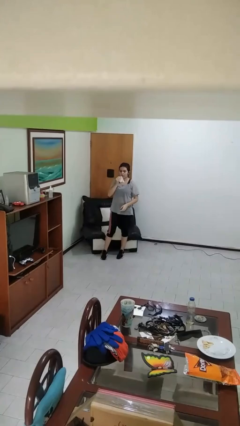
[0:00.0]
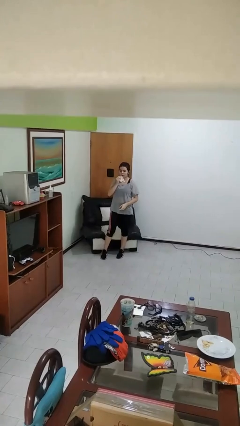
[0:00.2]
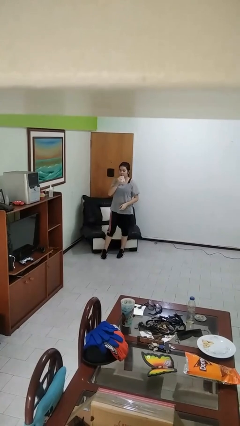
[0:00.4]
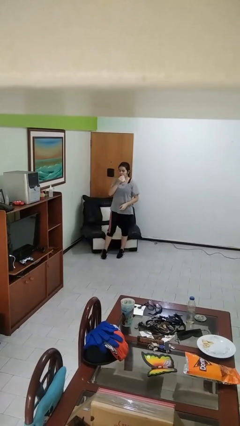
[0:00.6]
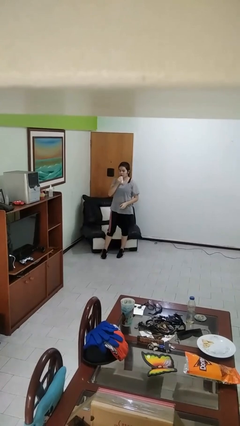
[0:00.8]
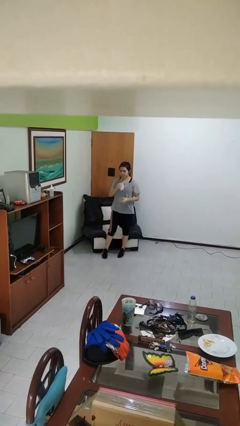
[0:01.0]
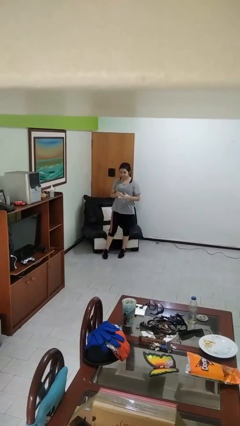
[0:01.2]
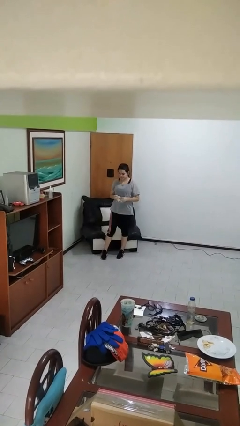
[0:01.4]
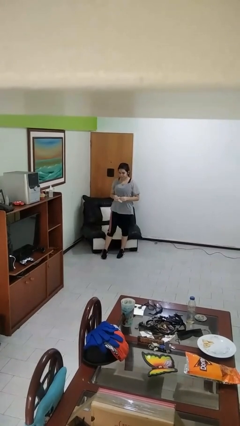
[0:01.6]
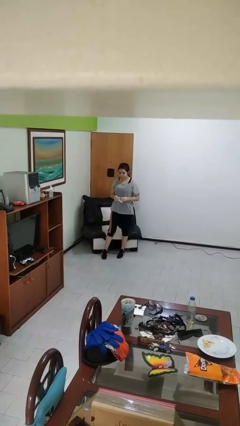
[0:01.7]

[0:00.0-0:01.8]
person wipes mouth with napkin

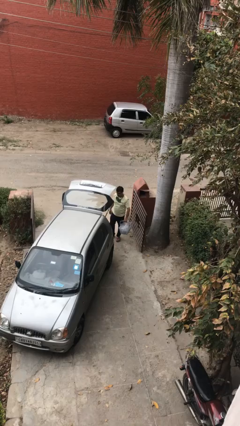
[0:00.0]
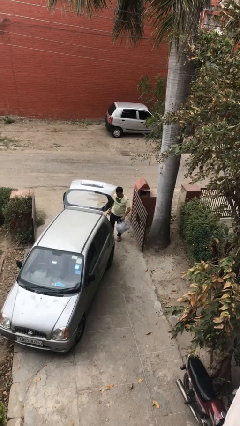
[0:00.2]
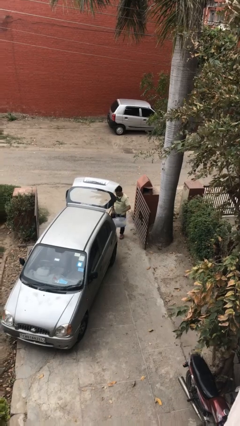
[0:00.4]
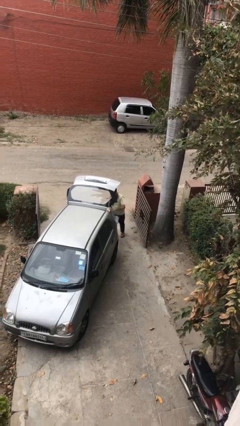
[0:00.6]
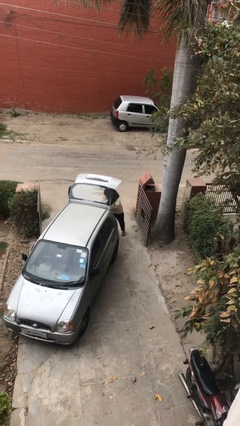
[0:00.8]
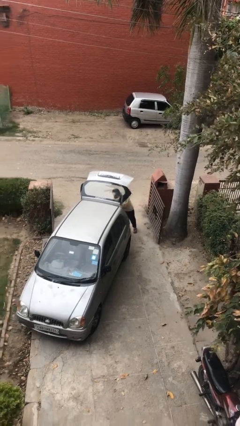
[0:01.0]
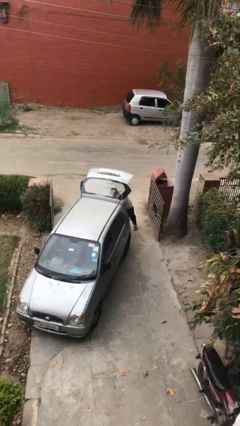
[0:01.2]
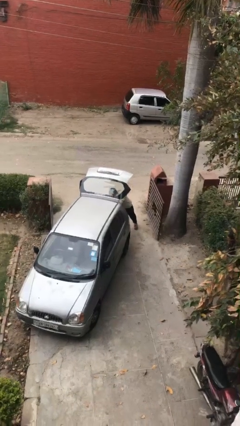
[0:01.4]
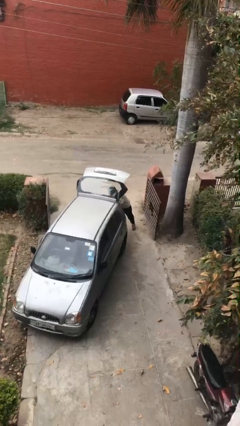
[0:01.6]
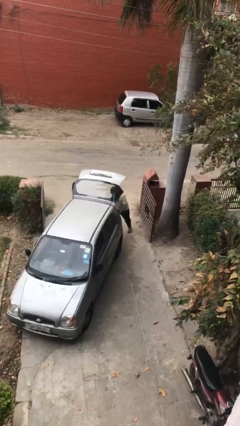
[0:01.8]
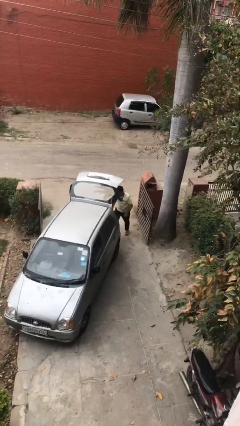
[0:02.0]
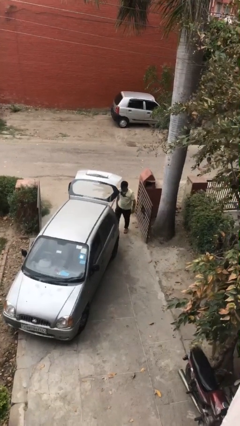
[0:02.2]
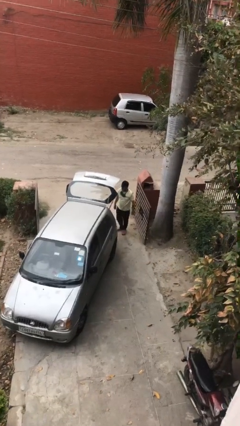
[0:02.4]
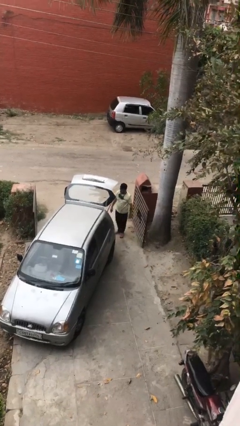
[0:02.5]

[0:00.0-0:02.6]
person loads car

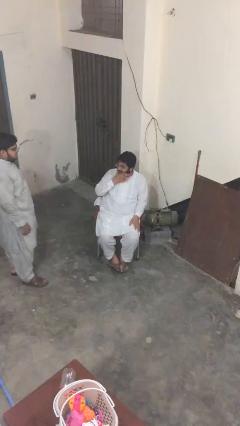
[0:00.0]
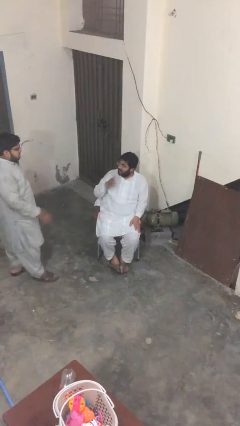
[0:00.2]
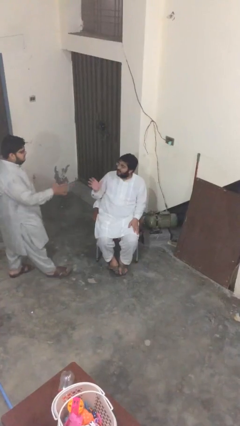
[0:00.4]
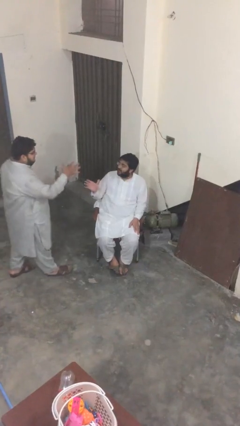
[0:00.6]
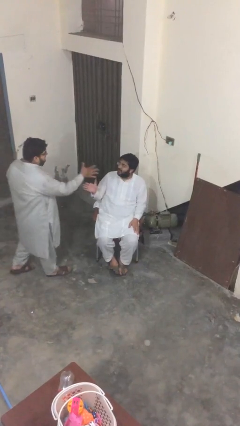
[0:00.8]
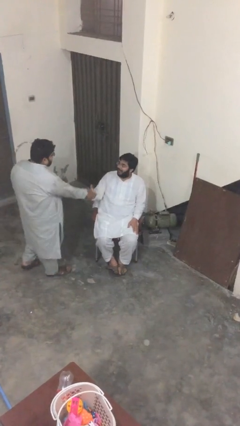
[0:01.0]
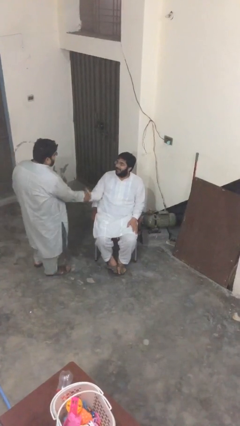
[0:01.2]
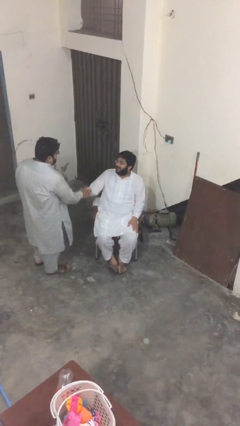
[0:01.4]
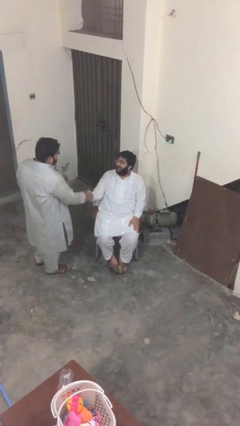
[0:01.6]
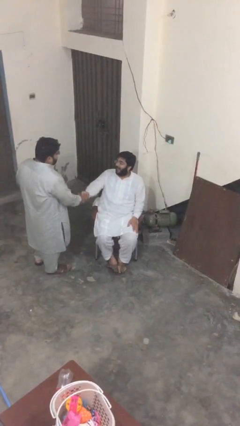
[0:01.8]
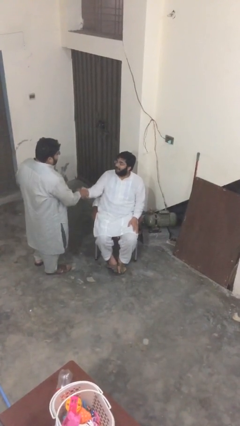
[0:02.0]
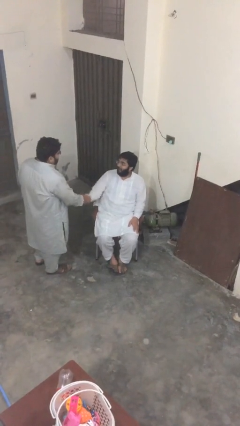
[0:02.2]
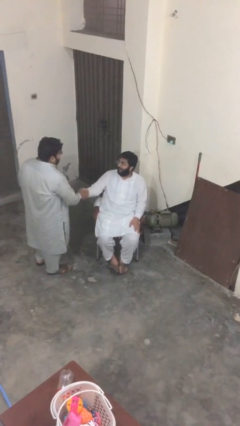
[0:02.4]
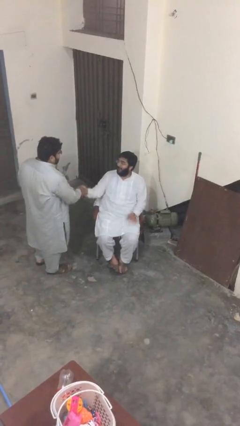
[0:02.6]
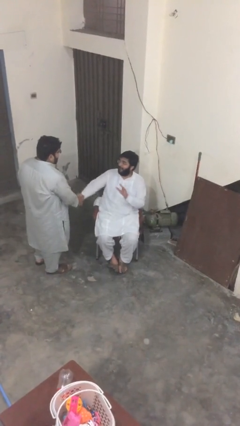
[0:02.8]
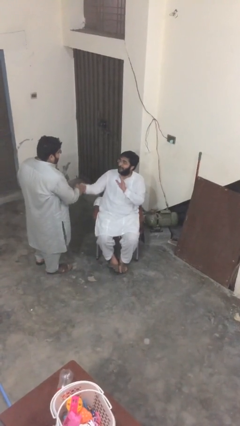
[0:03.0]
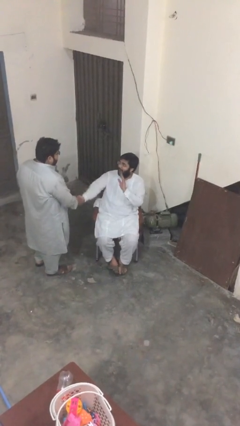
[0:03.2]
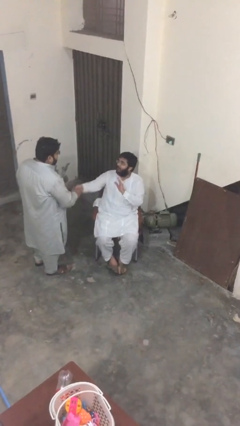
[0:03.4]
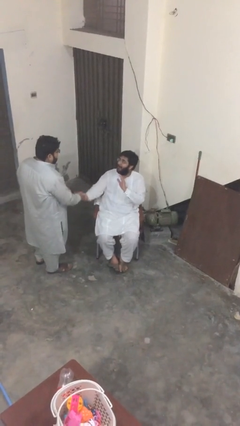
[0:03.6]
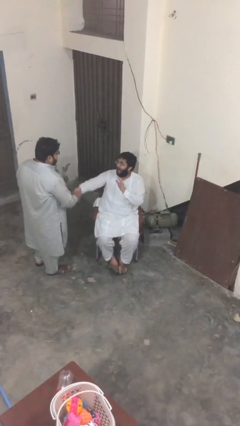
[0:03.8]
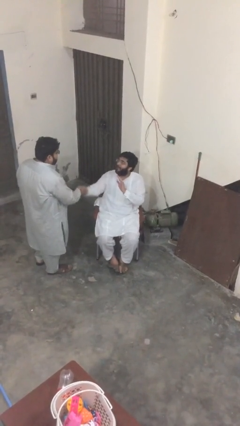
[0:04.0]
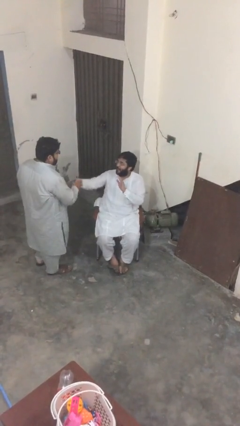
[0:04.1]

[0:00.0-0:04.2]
person shakes hand

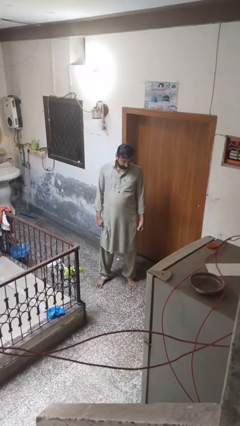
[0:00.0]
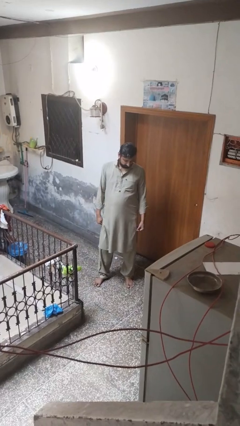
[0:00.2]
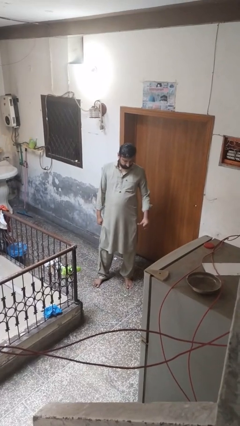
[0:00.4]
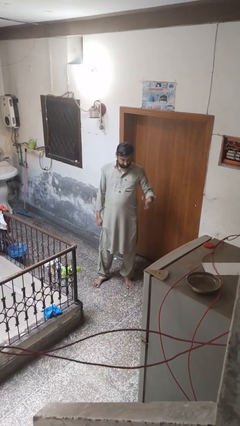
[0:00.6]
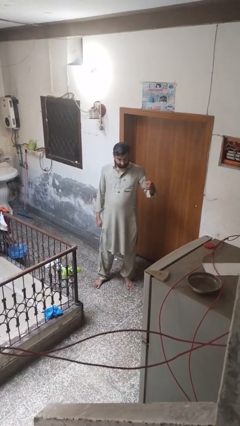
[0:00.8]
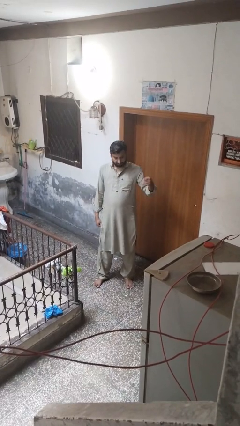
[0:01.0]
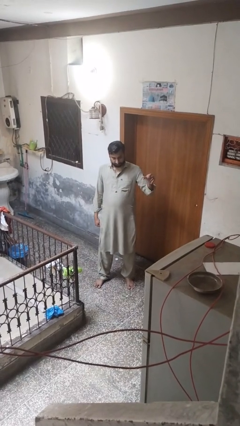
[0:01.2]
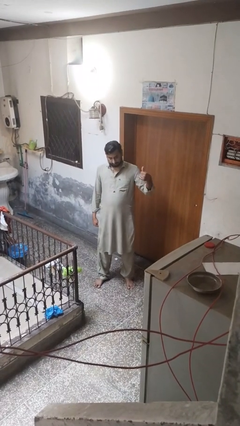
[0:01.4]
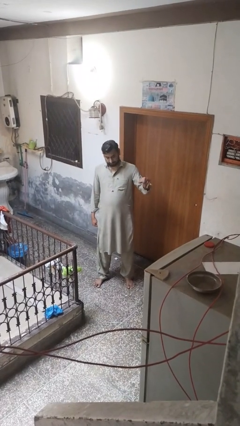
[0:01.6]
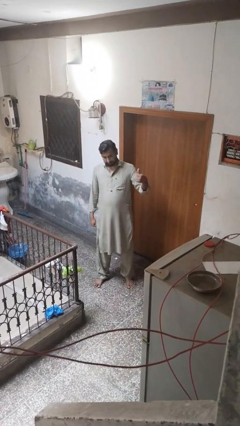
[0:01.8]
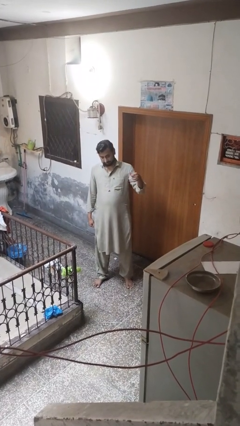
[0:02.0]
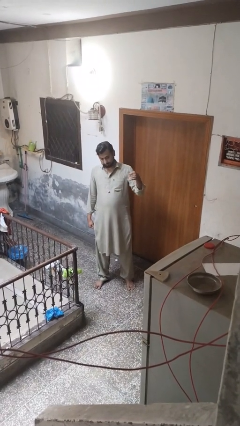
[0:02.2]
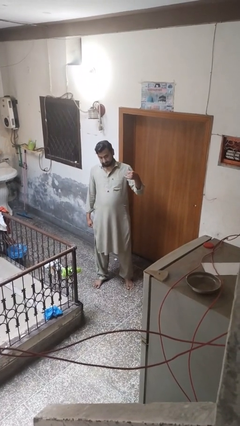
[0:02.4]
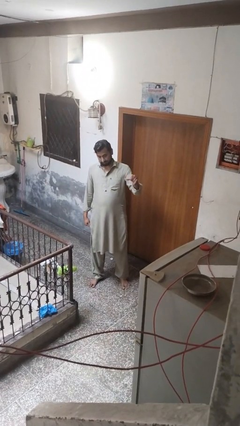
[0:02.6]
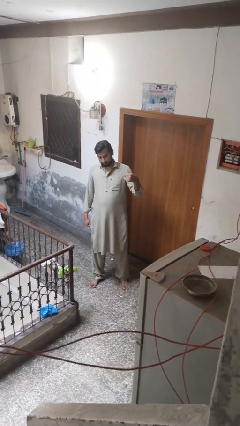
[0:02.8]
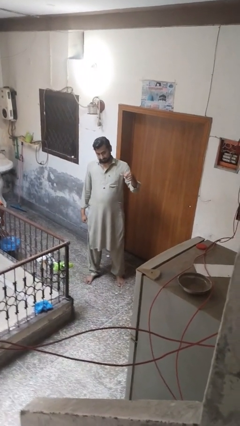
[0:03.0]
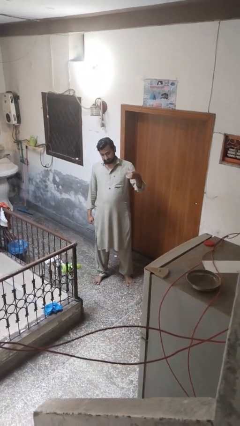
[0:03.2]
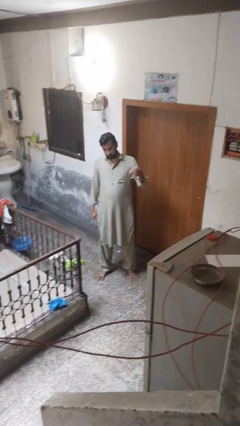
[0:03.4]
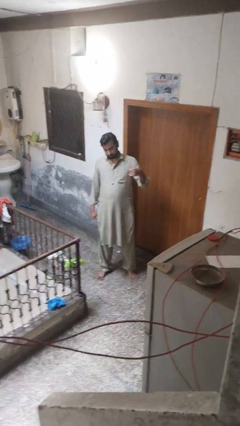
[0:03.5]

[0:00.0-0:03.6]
person gestures hang loose

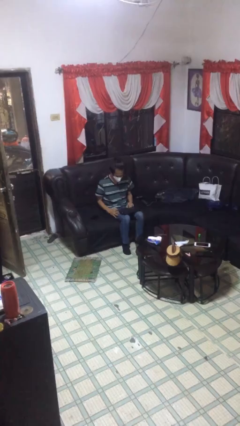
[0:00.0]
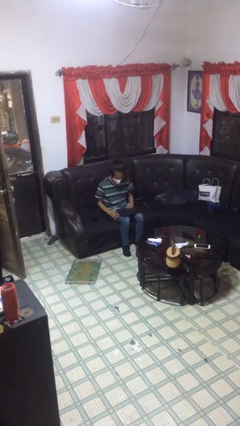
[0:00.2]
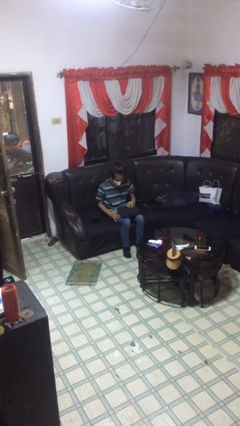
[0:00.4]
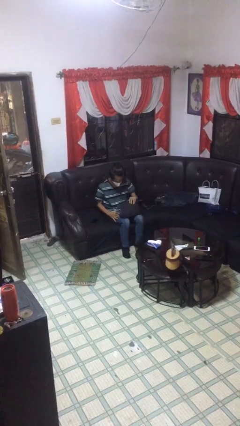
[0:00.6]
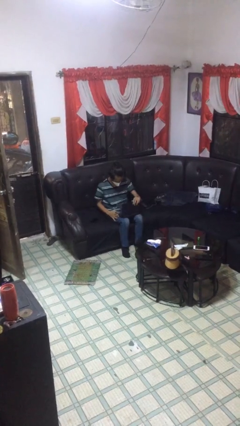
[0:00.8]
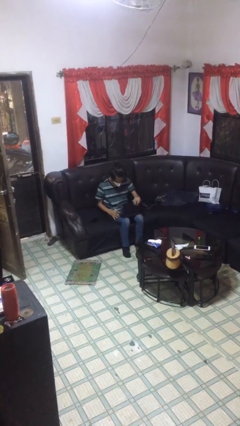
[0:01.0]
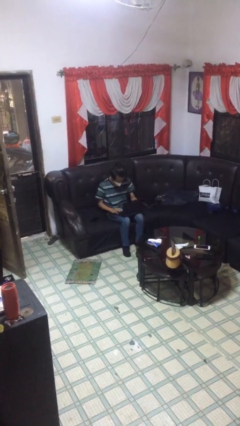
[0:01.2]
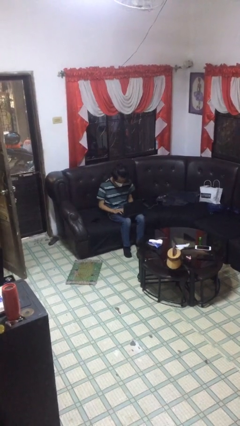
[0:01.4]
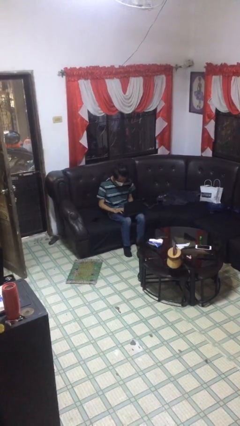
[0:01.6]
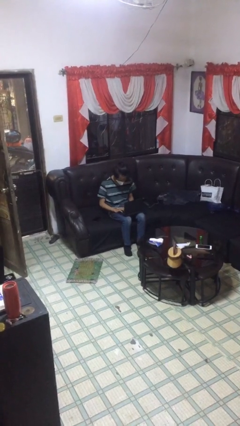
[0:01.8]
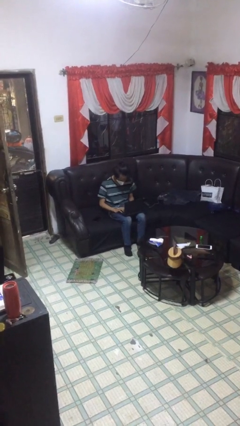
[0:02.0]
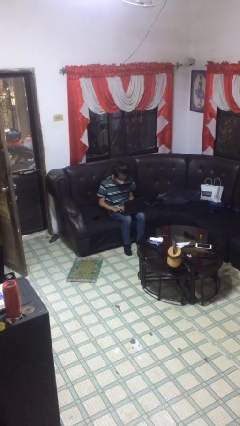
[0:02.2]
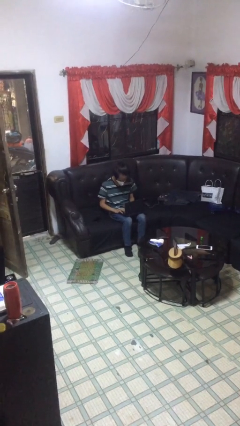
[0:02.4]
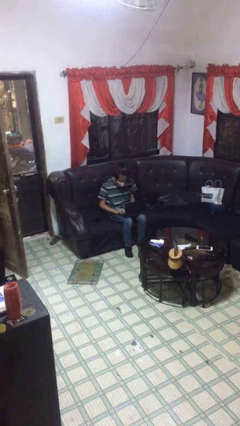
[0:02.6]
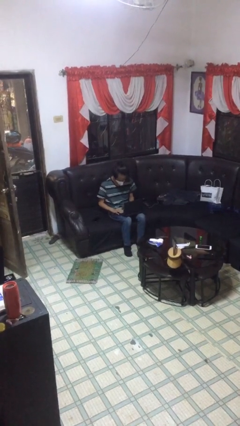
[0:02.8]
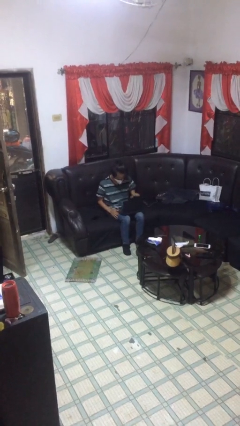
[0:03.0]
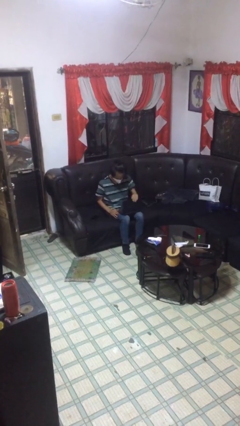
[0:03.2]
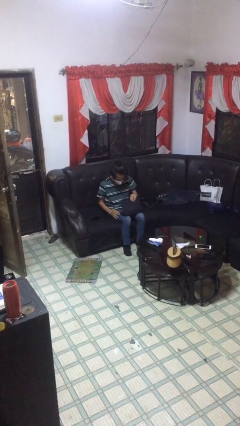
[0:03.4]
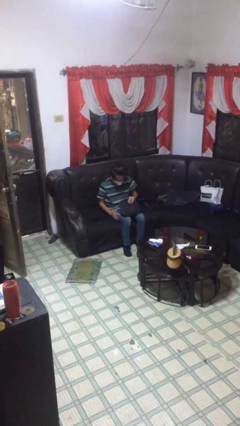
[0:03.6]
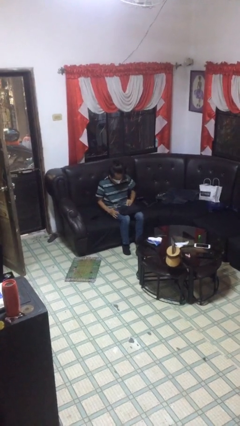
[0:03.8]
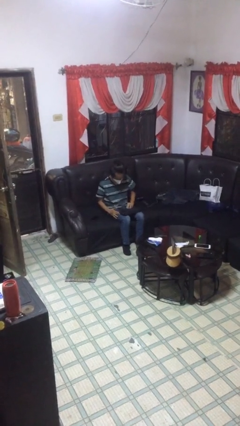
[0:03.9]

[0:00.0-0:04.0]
person interacts with laptop

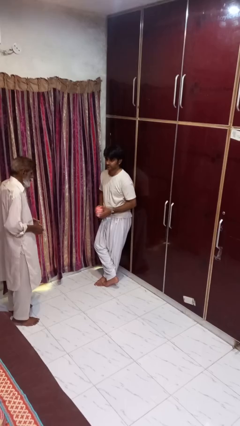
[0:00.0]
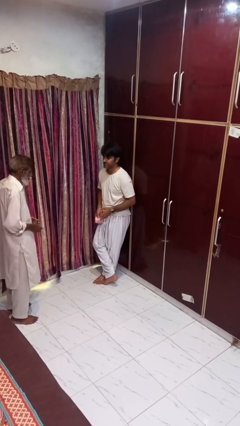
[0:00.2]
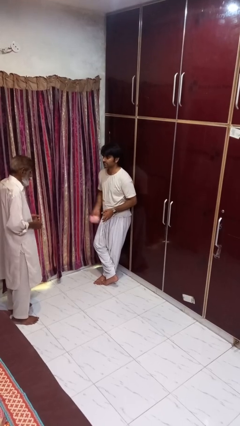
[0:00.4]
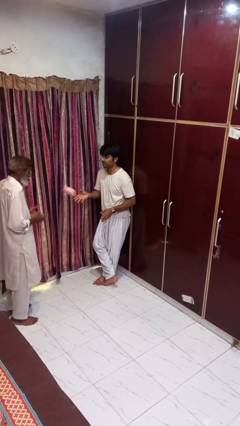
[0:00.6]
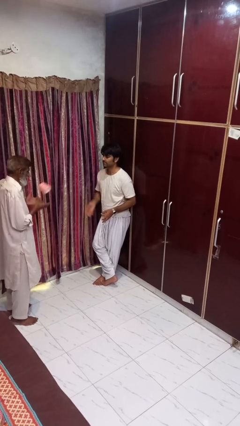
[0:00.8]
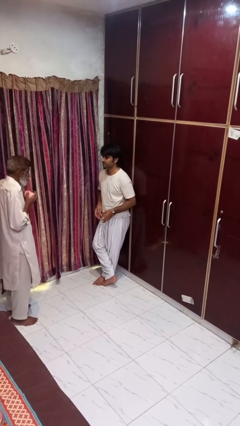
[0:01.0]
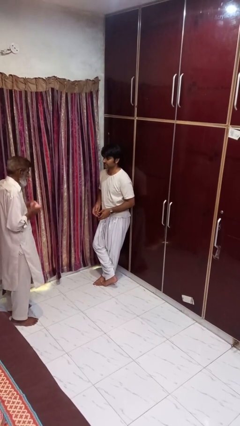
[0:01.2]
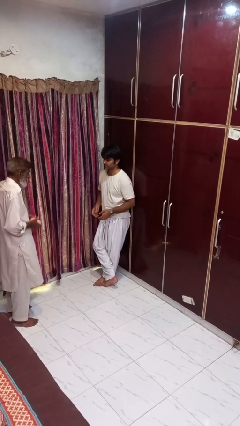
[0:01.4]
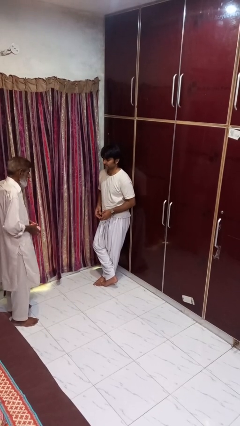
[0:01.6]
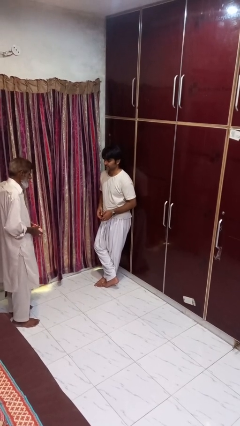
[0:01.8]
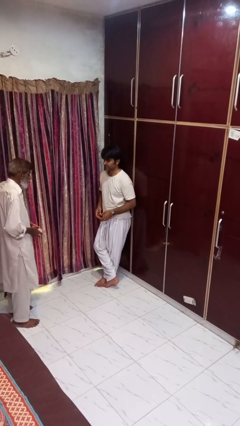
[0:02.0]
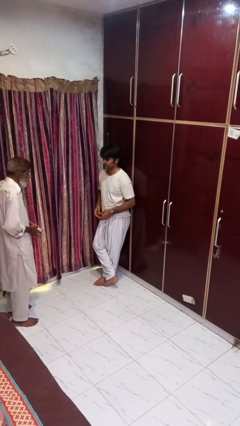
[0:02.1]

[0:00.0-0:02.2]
person throws object to person
